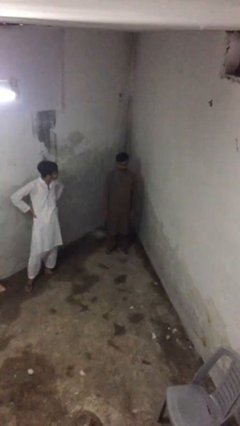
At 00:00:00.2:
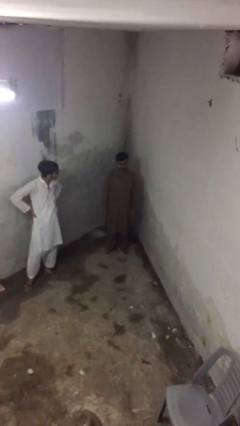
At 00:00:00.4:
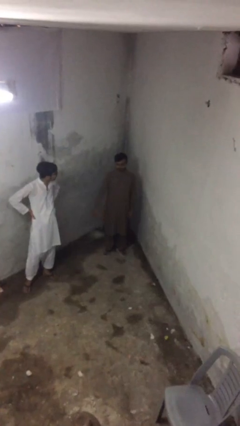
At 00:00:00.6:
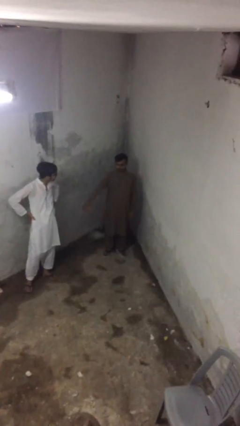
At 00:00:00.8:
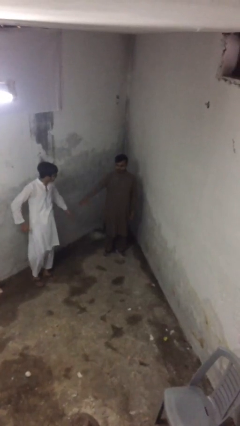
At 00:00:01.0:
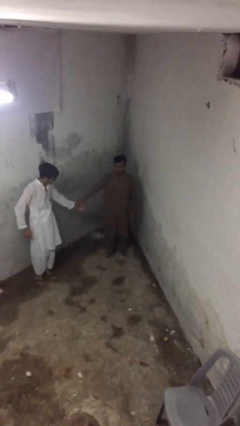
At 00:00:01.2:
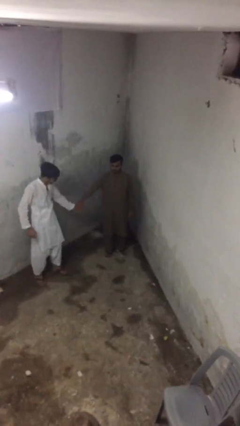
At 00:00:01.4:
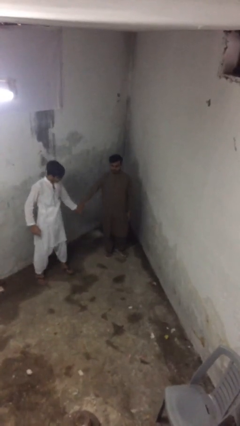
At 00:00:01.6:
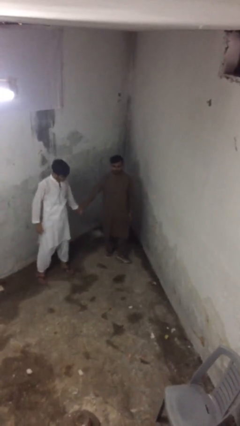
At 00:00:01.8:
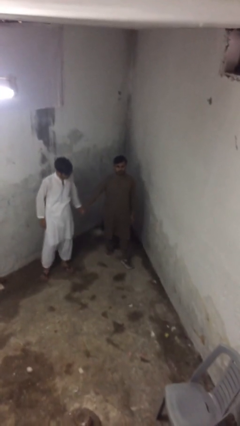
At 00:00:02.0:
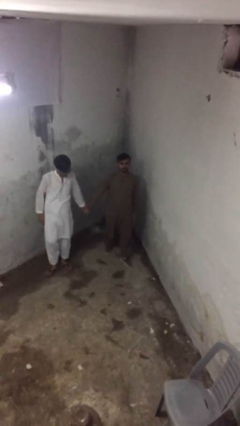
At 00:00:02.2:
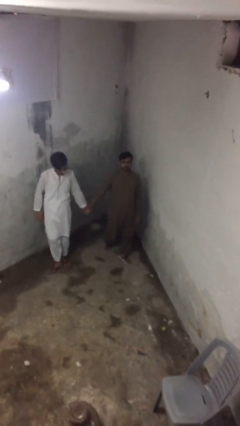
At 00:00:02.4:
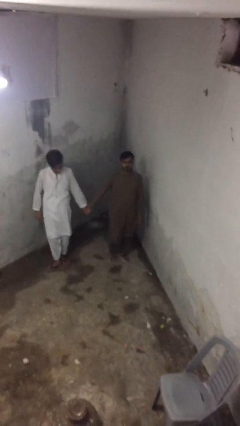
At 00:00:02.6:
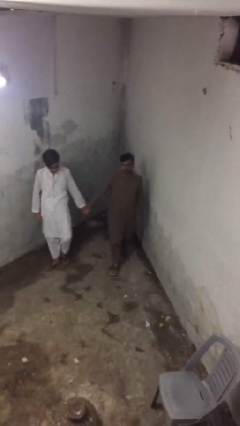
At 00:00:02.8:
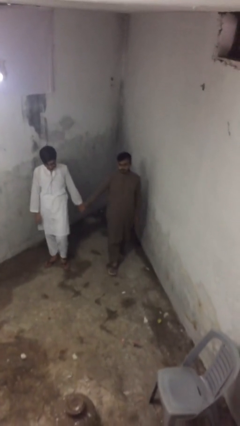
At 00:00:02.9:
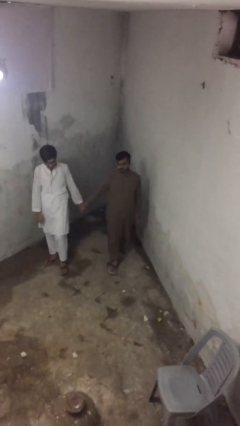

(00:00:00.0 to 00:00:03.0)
person holds hand

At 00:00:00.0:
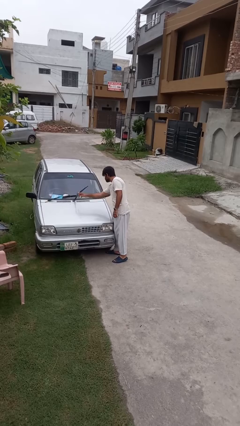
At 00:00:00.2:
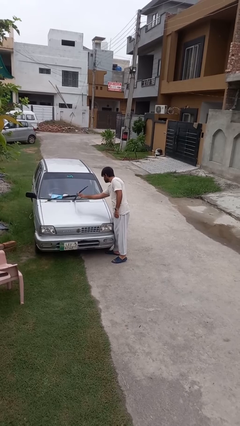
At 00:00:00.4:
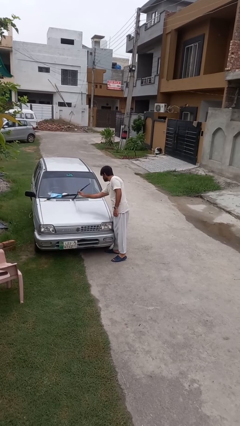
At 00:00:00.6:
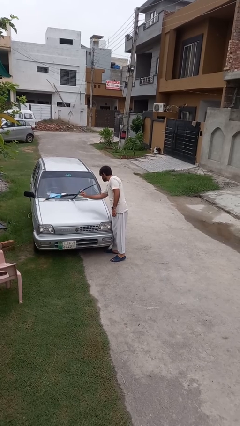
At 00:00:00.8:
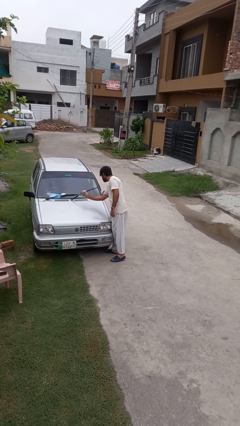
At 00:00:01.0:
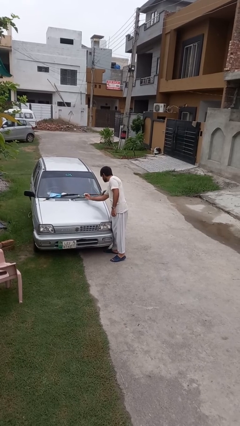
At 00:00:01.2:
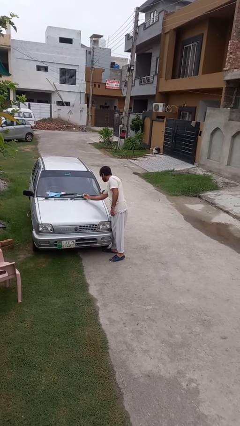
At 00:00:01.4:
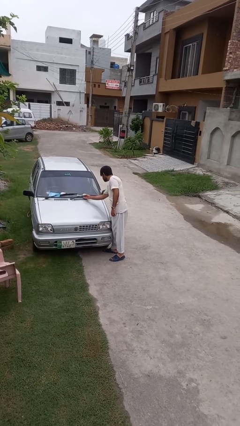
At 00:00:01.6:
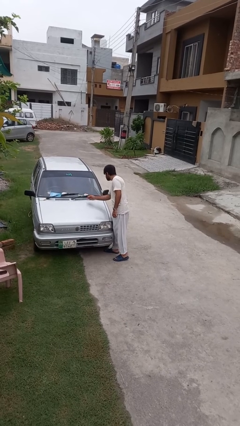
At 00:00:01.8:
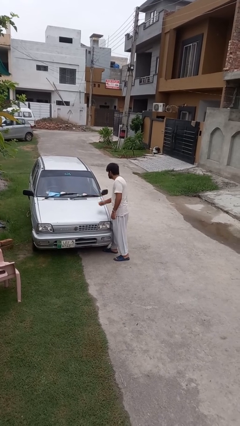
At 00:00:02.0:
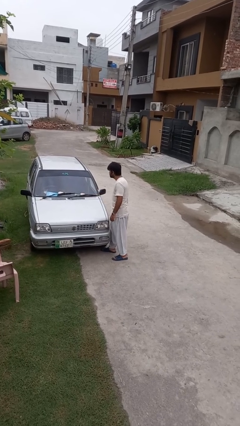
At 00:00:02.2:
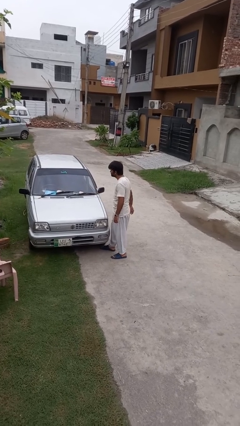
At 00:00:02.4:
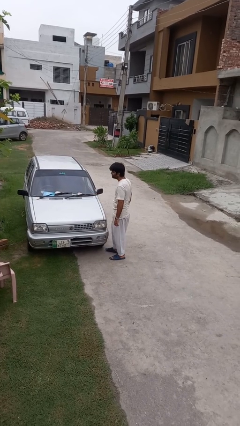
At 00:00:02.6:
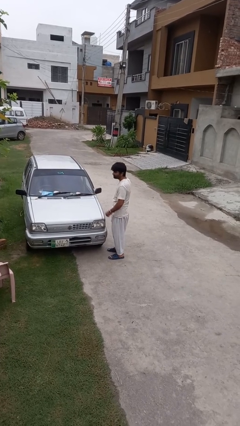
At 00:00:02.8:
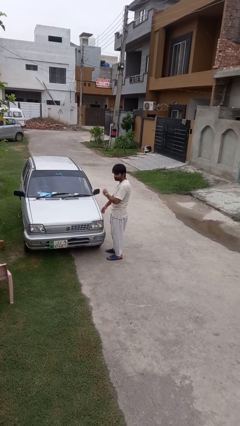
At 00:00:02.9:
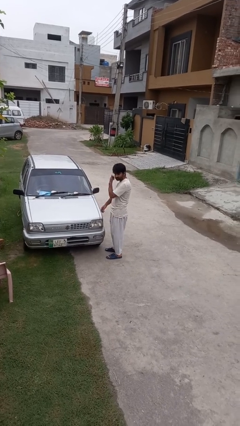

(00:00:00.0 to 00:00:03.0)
person flips down car wipers

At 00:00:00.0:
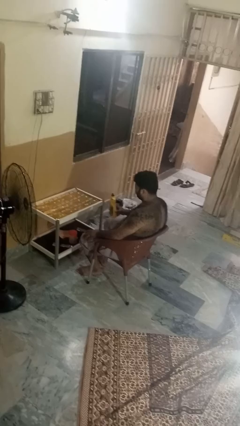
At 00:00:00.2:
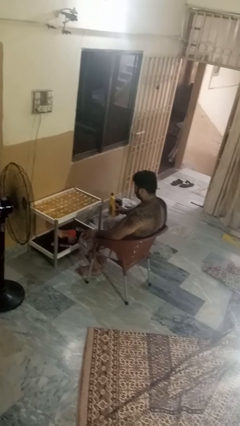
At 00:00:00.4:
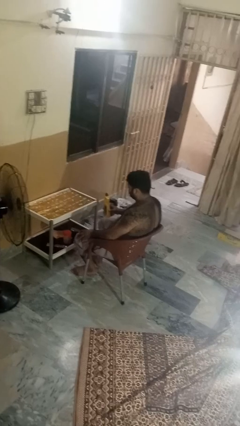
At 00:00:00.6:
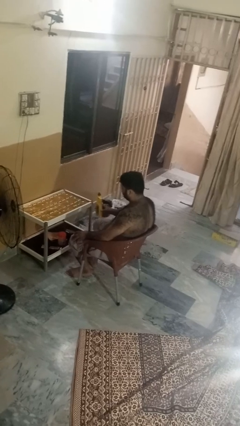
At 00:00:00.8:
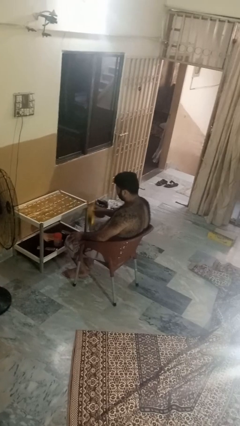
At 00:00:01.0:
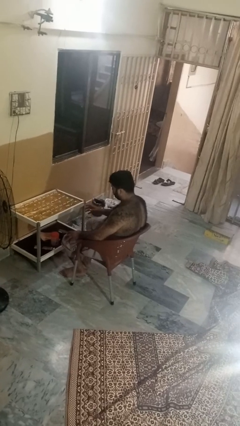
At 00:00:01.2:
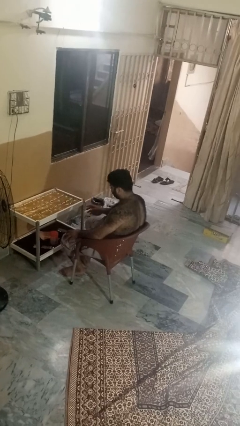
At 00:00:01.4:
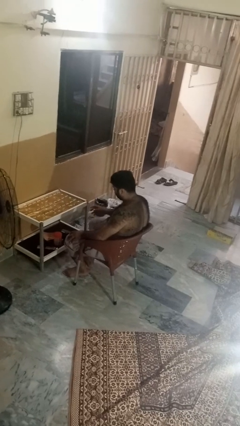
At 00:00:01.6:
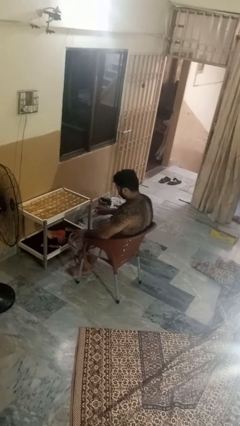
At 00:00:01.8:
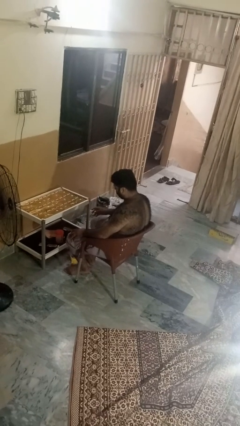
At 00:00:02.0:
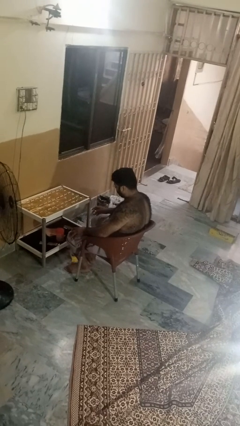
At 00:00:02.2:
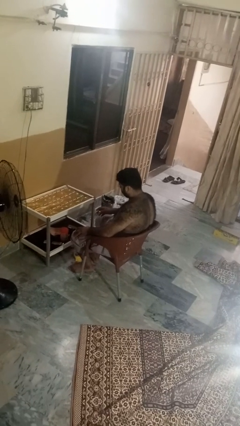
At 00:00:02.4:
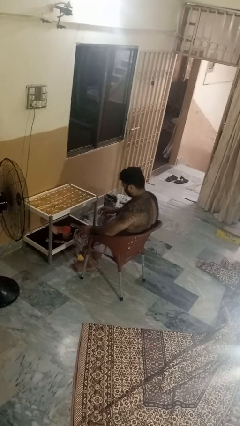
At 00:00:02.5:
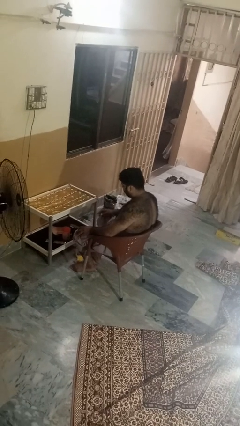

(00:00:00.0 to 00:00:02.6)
person throws object to ground

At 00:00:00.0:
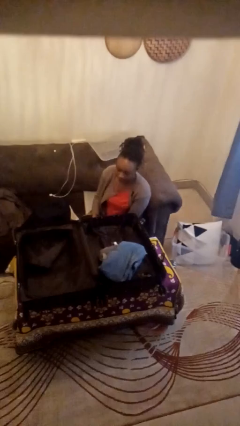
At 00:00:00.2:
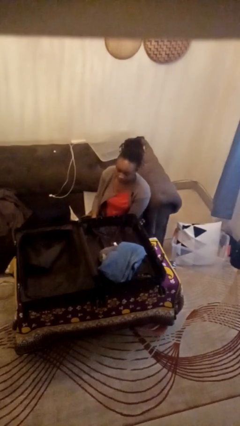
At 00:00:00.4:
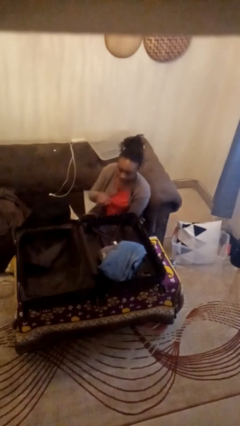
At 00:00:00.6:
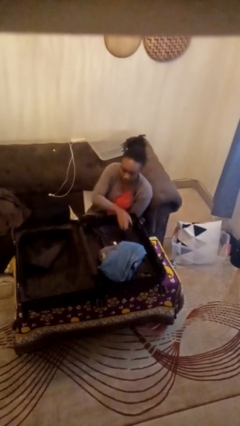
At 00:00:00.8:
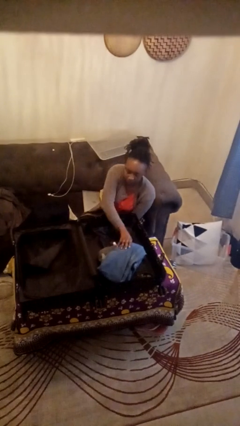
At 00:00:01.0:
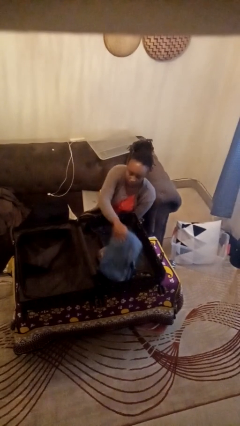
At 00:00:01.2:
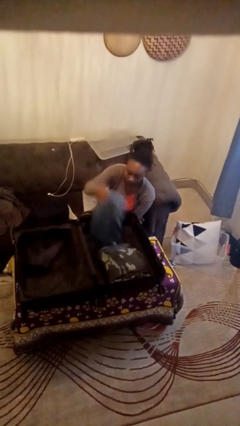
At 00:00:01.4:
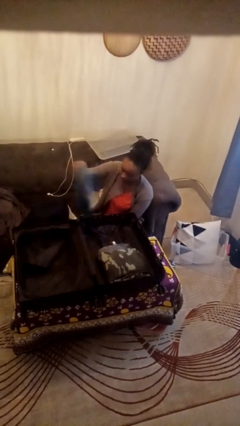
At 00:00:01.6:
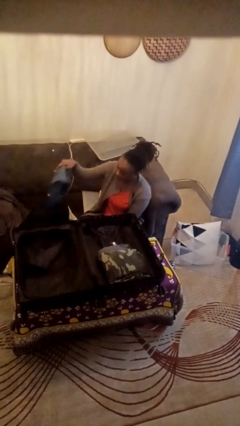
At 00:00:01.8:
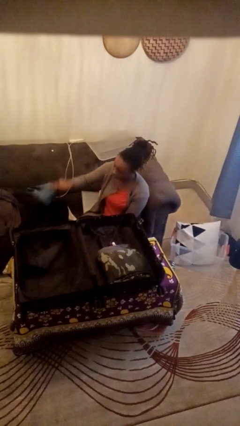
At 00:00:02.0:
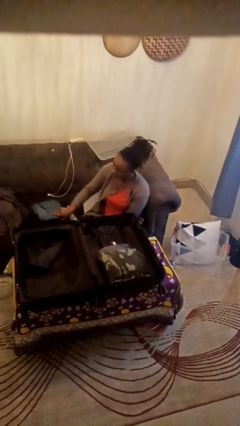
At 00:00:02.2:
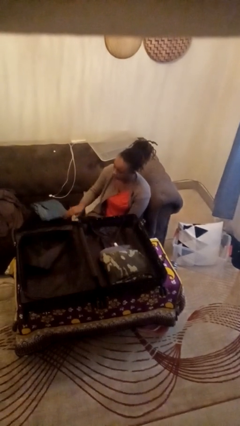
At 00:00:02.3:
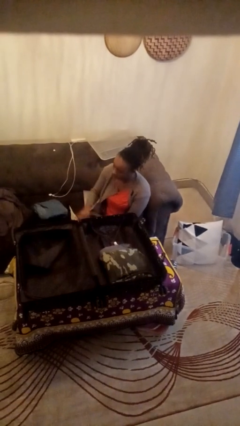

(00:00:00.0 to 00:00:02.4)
person unloads clothes from suitcase

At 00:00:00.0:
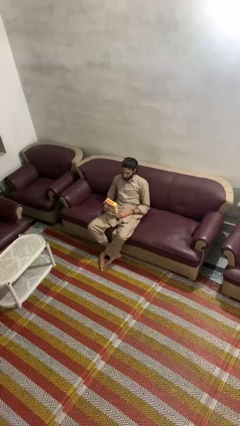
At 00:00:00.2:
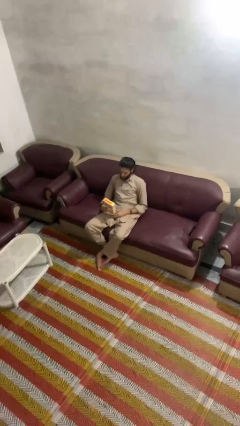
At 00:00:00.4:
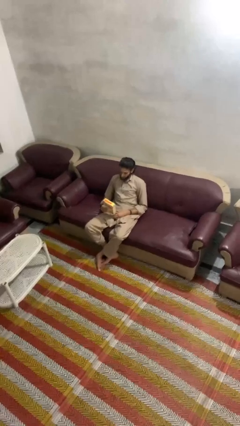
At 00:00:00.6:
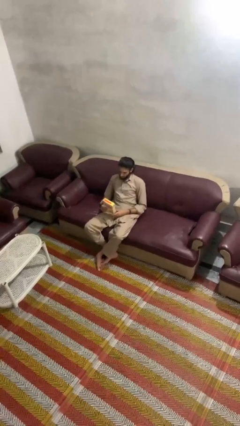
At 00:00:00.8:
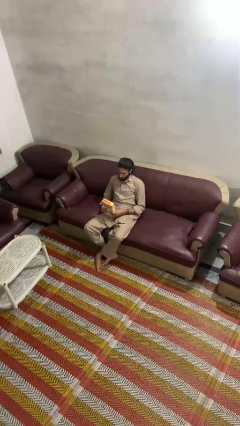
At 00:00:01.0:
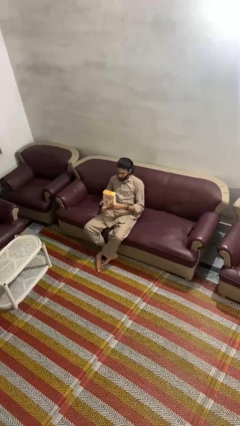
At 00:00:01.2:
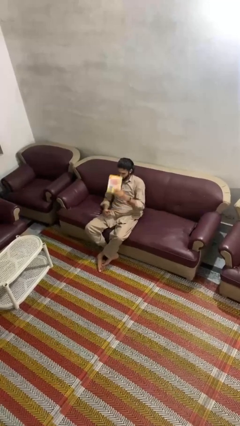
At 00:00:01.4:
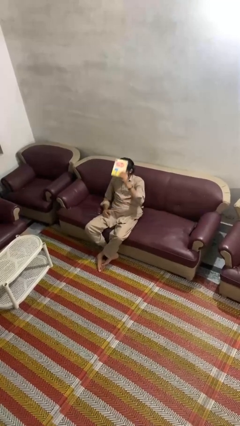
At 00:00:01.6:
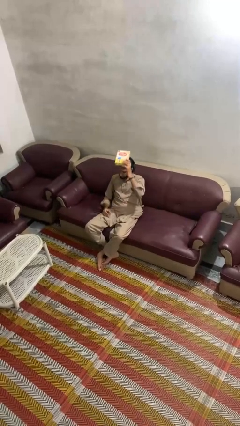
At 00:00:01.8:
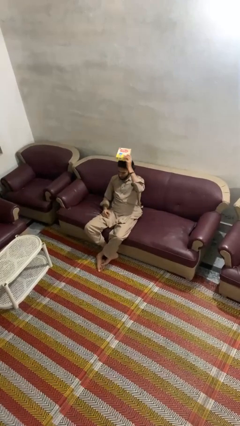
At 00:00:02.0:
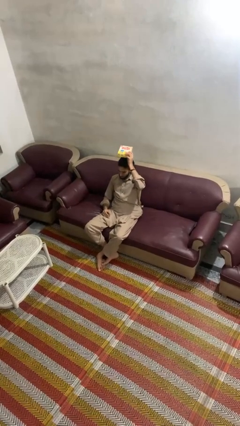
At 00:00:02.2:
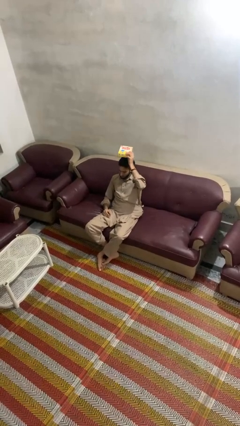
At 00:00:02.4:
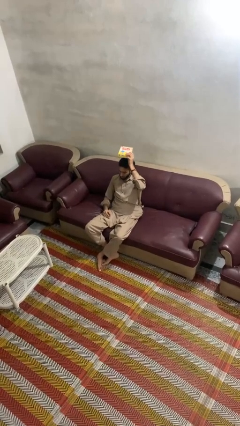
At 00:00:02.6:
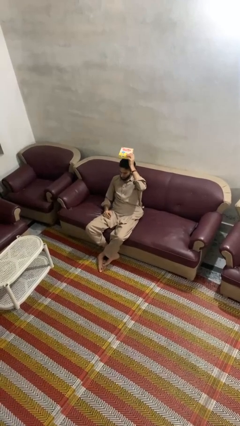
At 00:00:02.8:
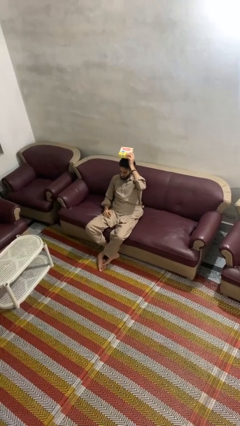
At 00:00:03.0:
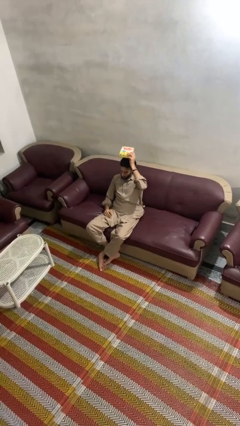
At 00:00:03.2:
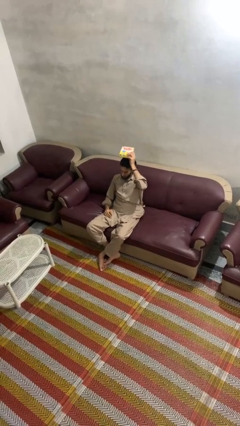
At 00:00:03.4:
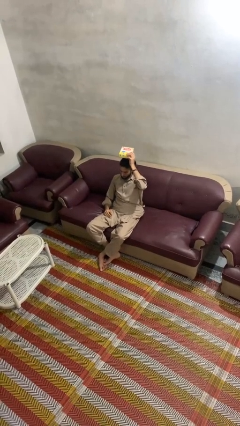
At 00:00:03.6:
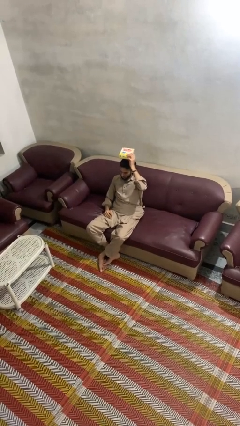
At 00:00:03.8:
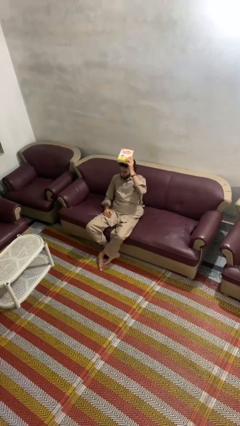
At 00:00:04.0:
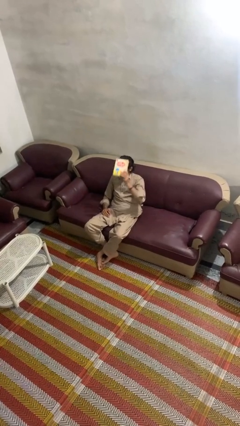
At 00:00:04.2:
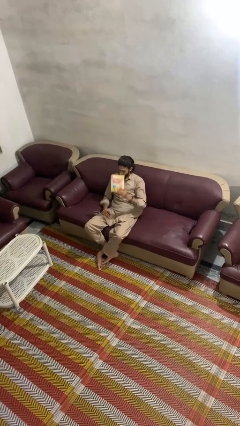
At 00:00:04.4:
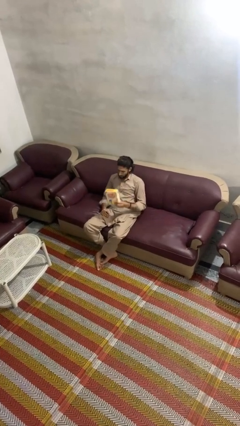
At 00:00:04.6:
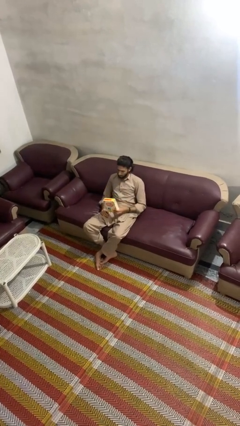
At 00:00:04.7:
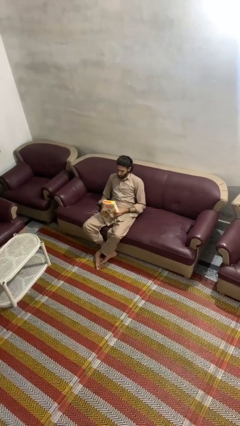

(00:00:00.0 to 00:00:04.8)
person holds object above head

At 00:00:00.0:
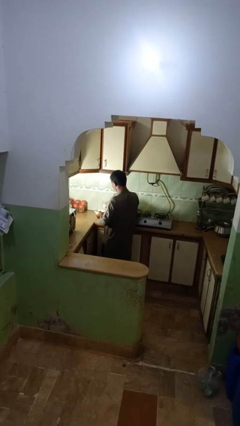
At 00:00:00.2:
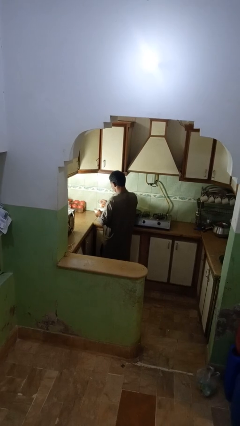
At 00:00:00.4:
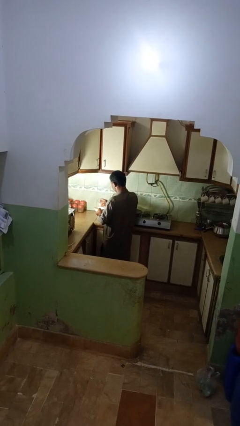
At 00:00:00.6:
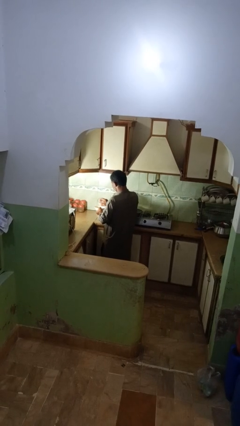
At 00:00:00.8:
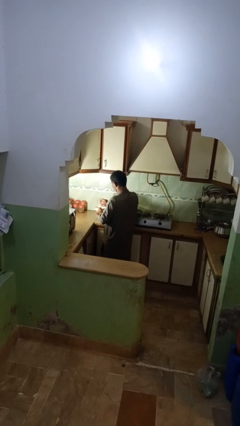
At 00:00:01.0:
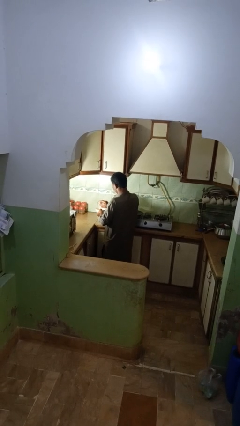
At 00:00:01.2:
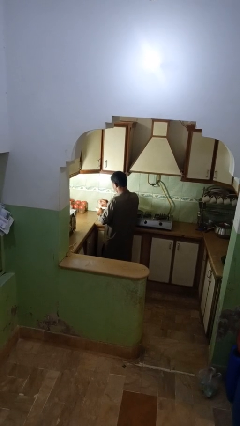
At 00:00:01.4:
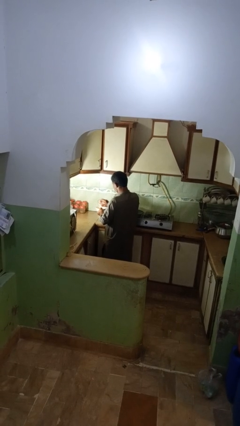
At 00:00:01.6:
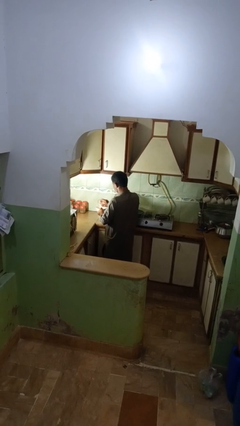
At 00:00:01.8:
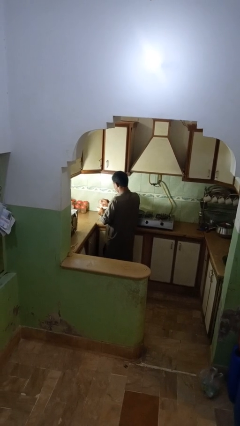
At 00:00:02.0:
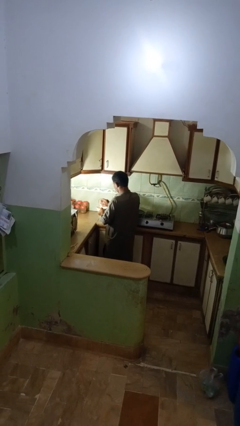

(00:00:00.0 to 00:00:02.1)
person pours into bowl
